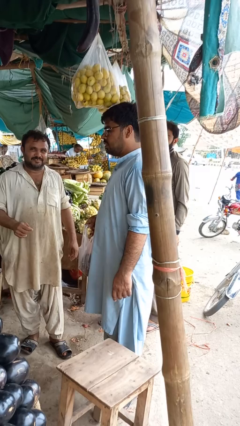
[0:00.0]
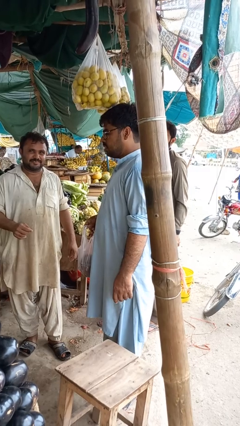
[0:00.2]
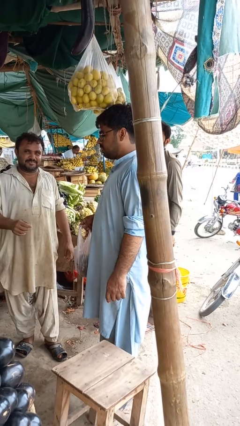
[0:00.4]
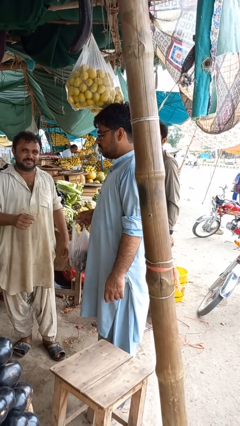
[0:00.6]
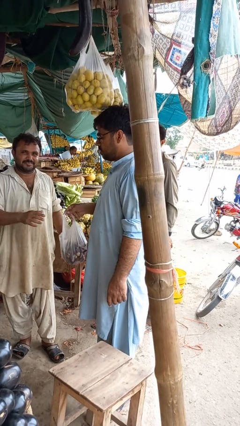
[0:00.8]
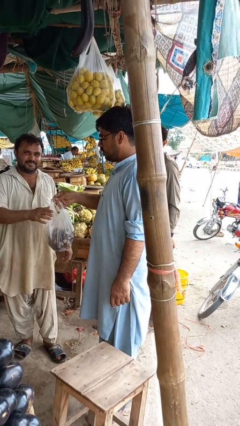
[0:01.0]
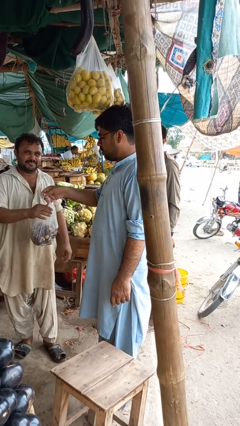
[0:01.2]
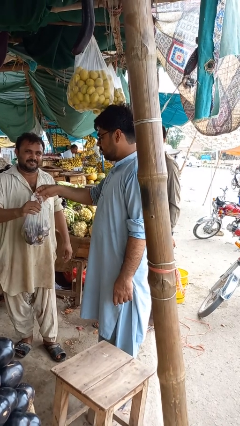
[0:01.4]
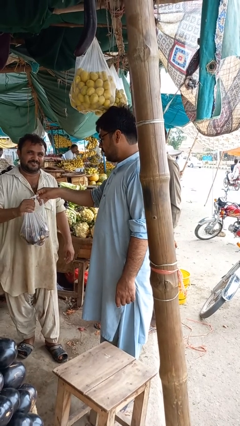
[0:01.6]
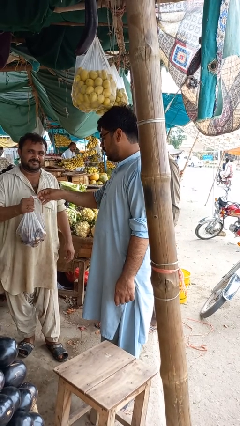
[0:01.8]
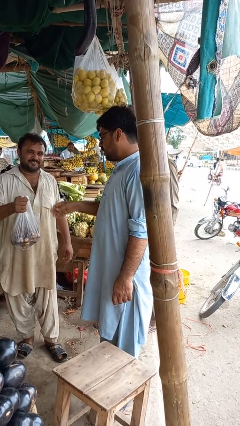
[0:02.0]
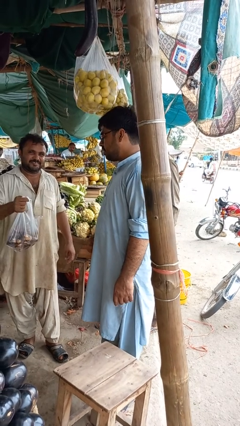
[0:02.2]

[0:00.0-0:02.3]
person transfers object to person

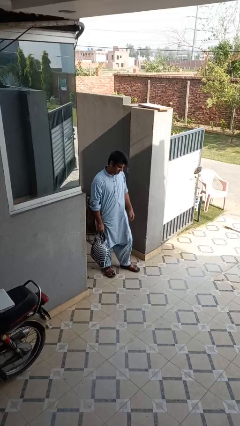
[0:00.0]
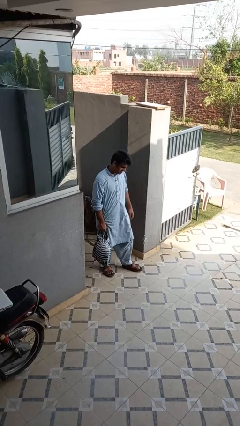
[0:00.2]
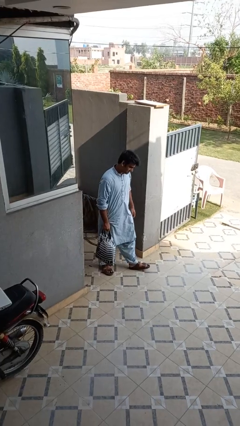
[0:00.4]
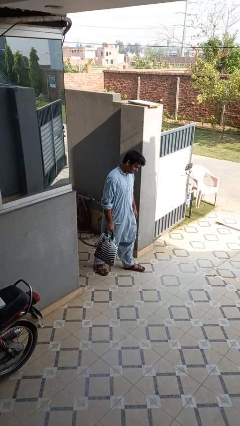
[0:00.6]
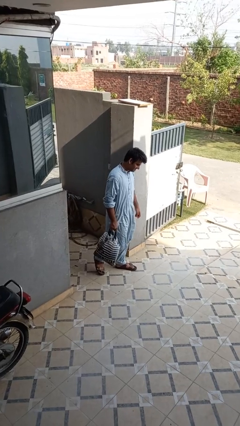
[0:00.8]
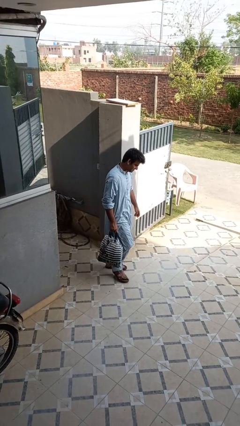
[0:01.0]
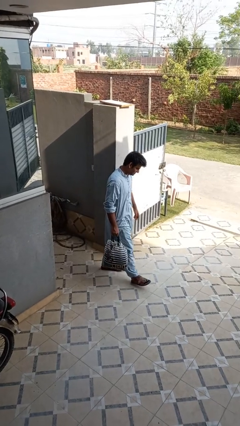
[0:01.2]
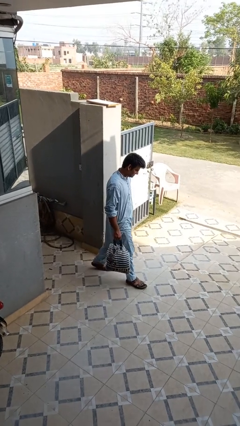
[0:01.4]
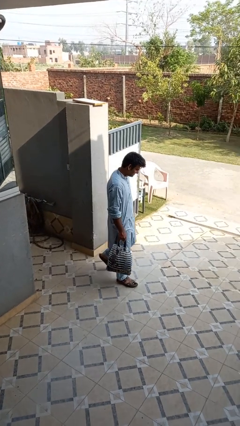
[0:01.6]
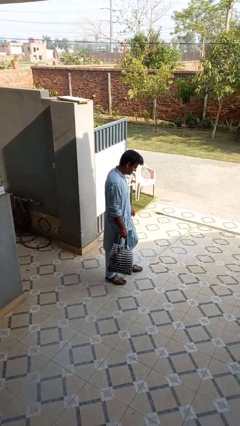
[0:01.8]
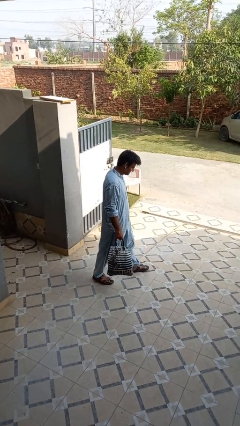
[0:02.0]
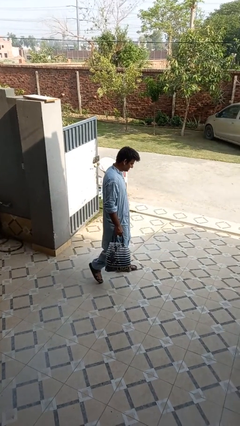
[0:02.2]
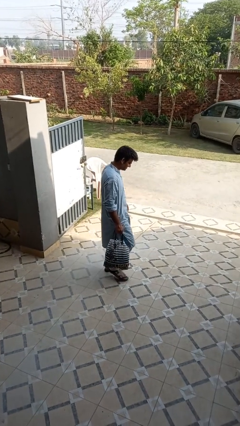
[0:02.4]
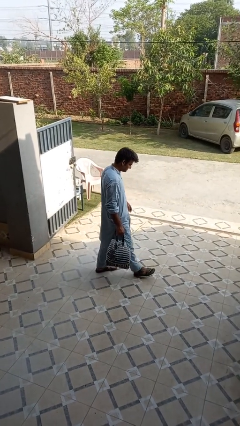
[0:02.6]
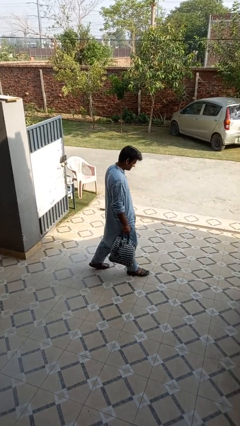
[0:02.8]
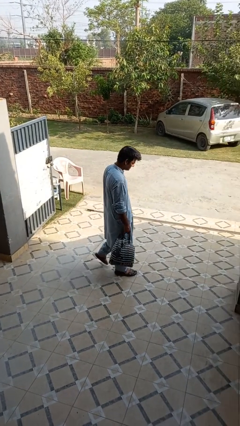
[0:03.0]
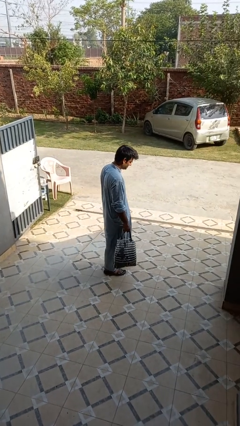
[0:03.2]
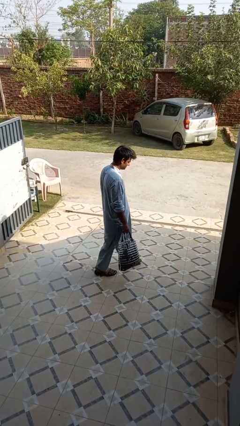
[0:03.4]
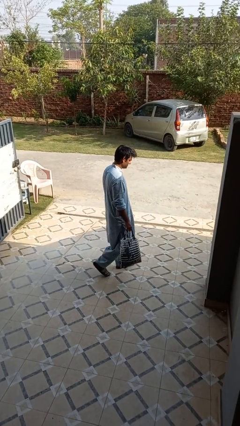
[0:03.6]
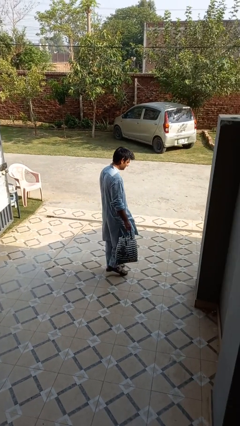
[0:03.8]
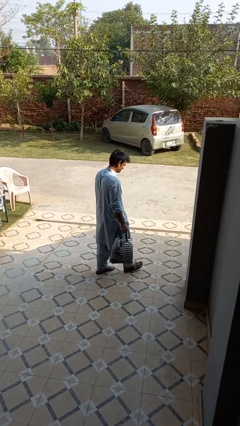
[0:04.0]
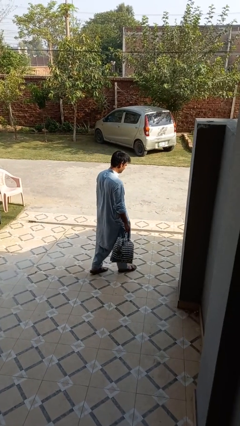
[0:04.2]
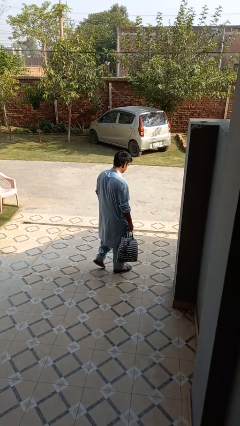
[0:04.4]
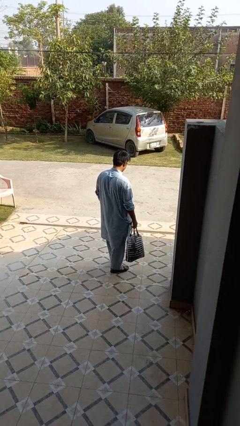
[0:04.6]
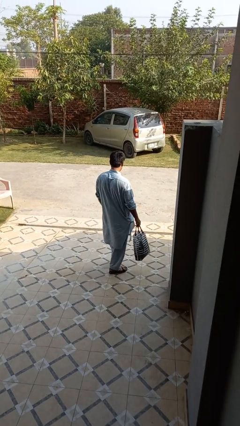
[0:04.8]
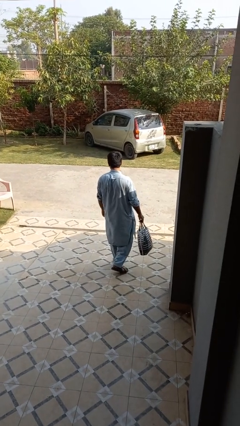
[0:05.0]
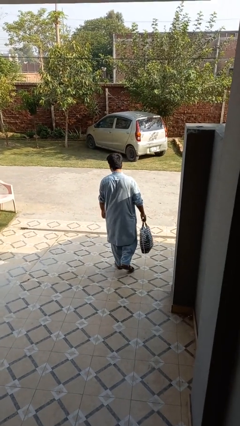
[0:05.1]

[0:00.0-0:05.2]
person carries groceries

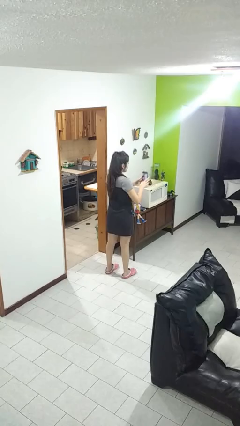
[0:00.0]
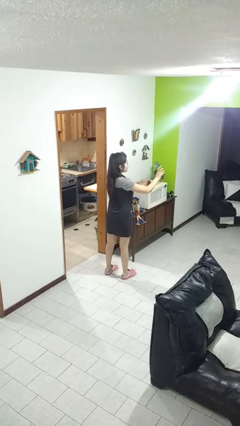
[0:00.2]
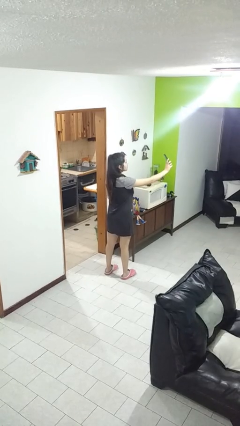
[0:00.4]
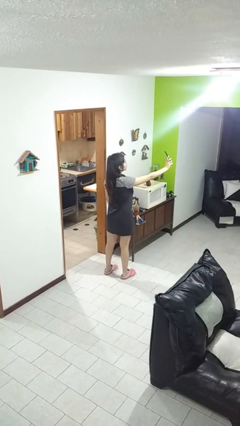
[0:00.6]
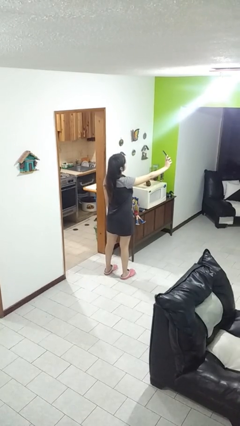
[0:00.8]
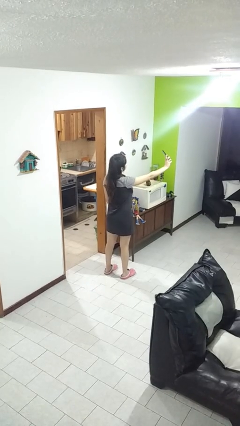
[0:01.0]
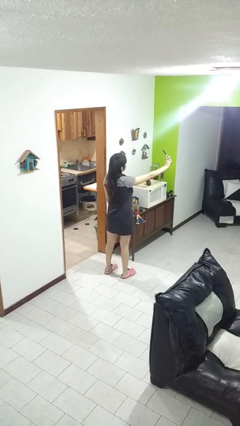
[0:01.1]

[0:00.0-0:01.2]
person takes selfie

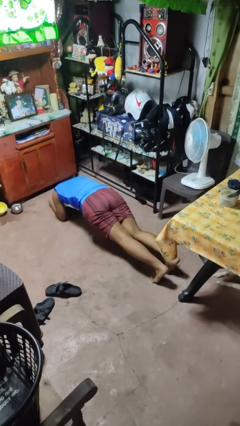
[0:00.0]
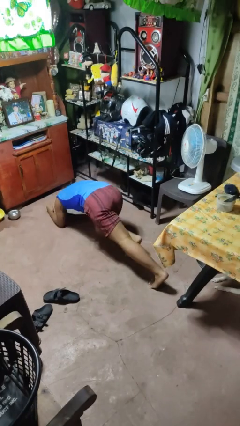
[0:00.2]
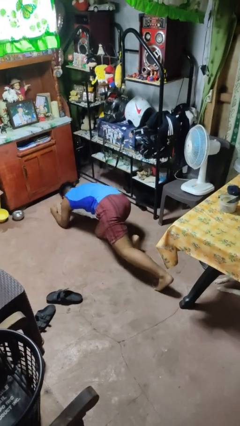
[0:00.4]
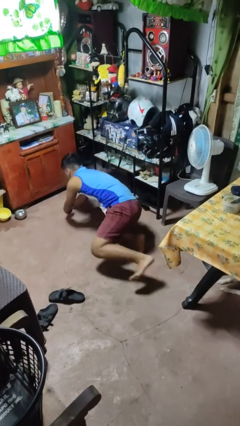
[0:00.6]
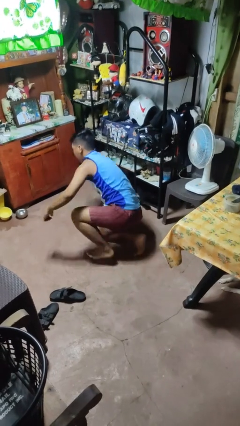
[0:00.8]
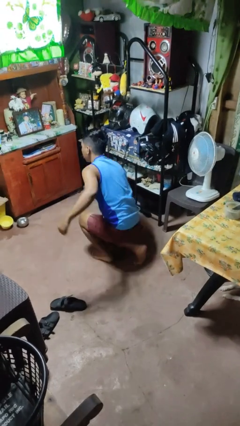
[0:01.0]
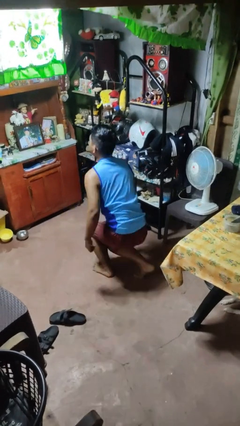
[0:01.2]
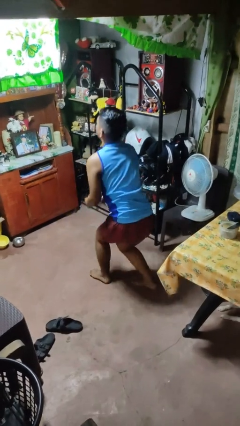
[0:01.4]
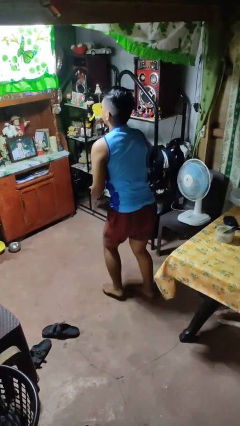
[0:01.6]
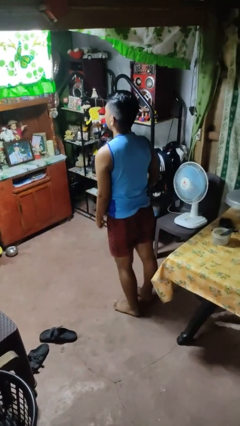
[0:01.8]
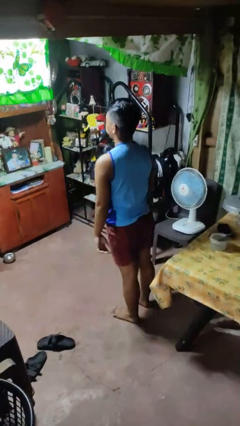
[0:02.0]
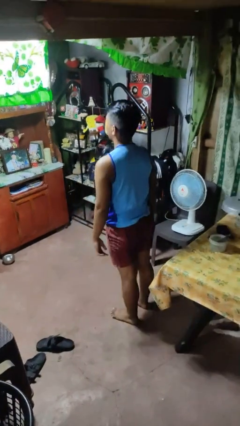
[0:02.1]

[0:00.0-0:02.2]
person stands up from floor

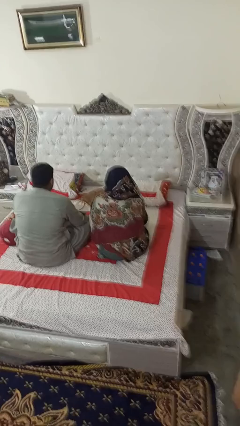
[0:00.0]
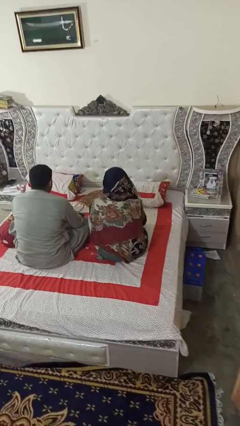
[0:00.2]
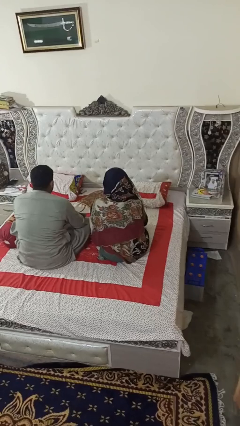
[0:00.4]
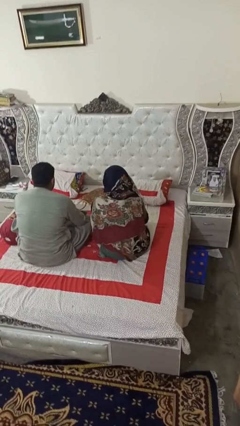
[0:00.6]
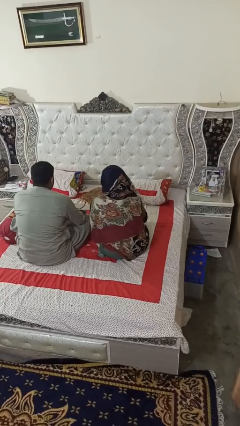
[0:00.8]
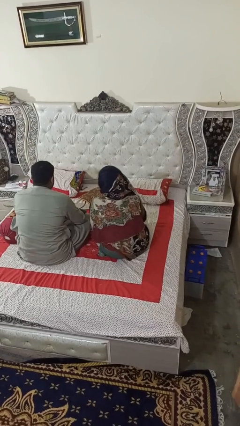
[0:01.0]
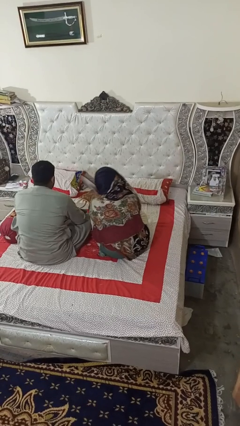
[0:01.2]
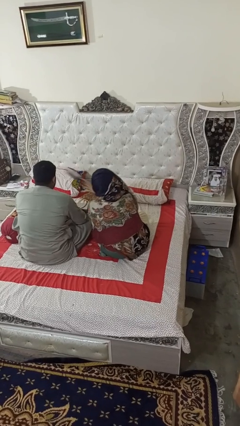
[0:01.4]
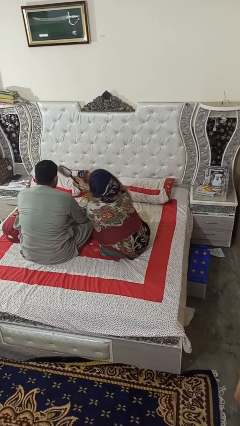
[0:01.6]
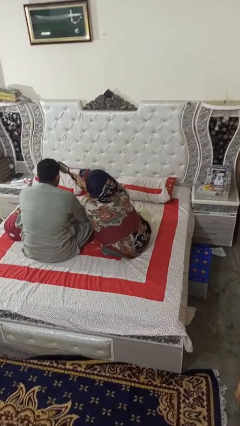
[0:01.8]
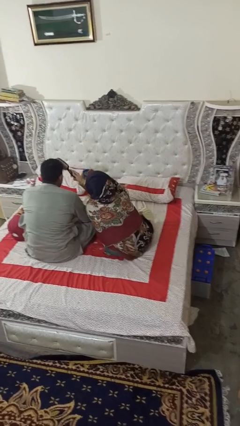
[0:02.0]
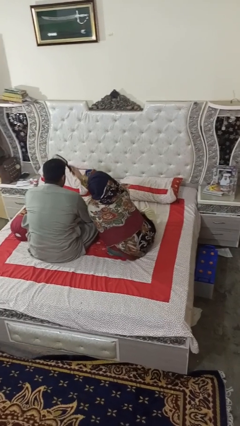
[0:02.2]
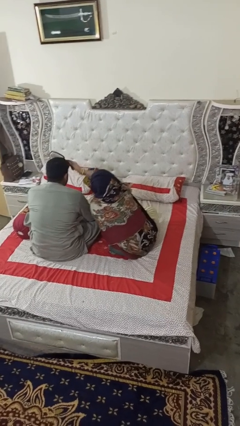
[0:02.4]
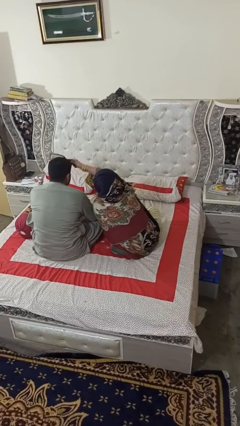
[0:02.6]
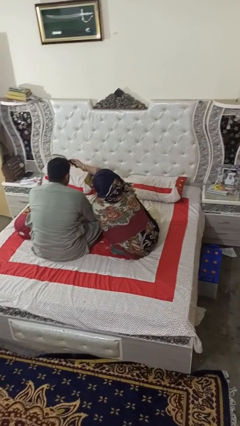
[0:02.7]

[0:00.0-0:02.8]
person brushes hair of person

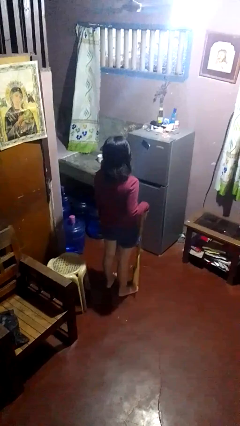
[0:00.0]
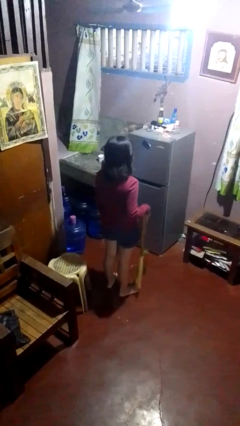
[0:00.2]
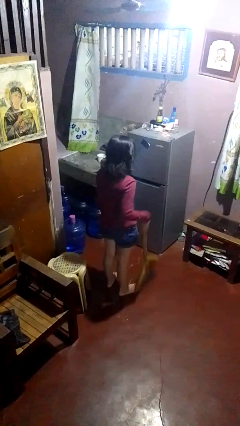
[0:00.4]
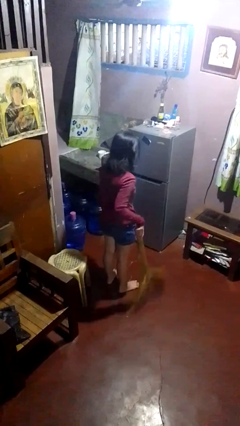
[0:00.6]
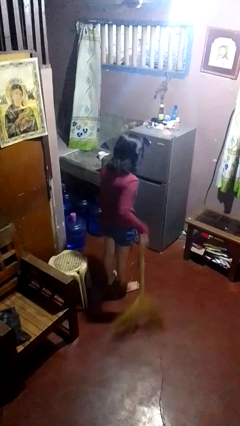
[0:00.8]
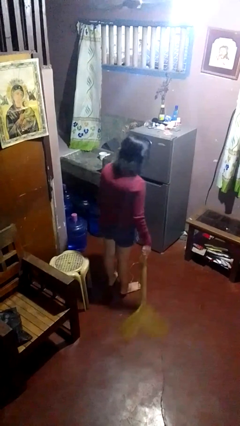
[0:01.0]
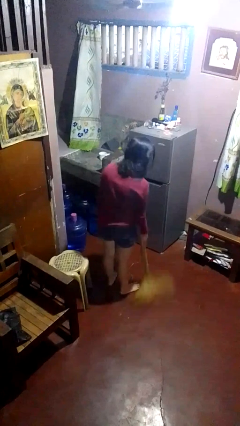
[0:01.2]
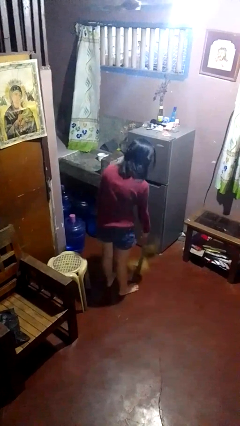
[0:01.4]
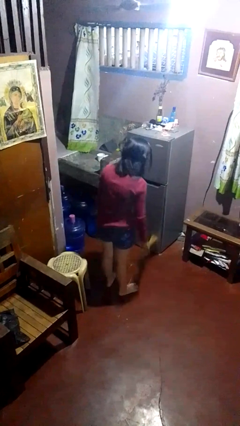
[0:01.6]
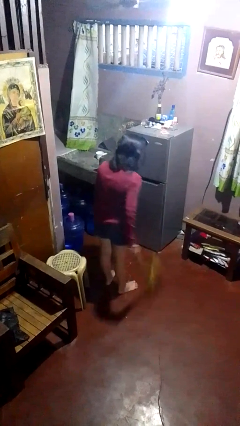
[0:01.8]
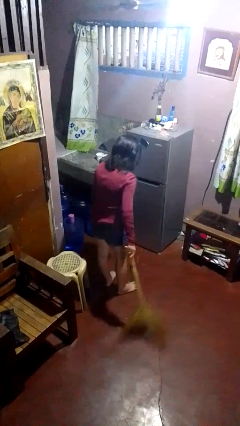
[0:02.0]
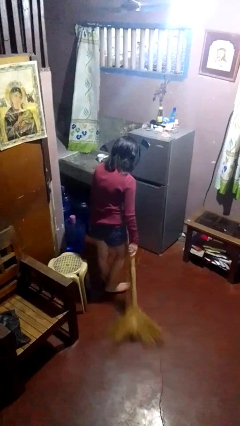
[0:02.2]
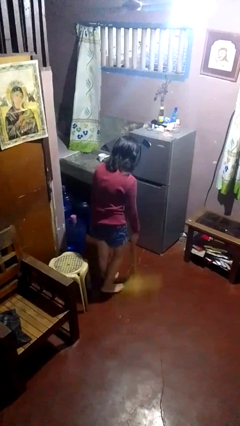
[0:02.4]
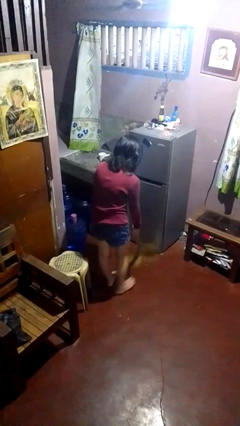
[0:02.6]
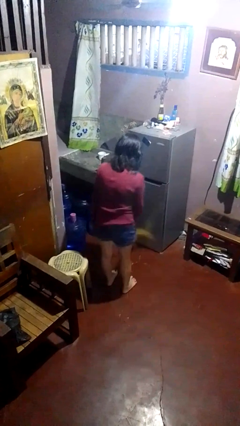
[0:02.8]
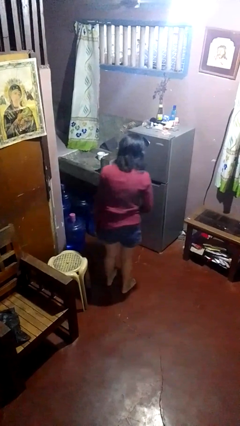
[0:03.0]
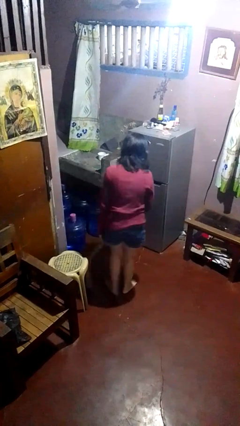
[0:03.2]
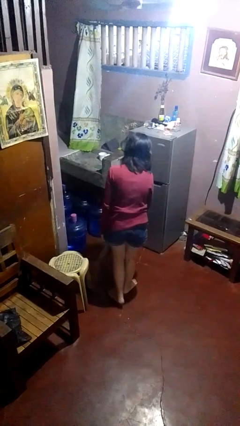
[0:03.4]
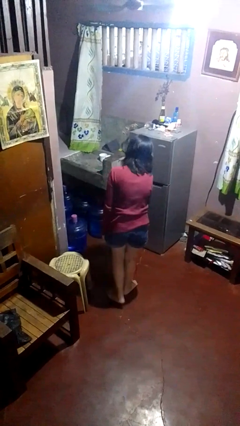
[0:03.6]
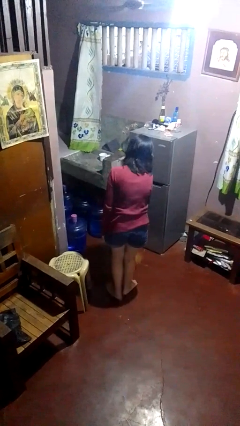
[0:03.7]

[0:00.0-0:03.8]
person sweeps floor
